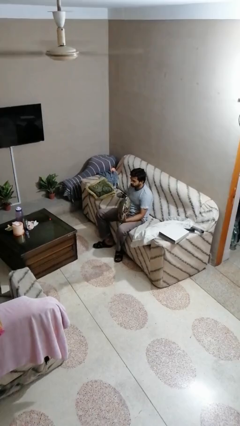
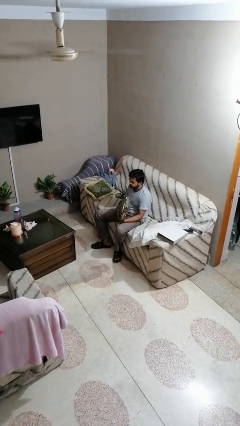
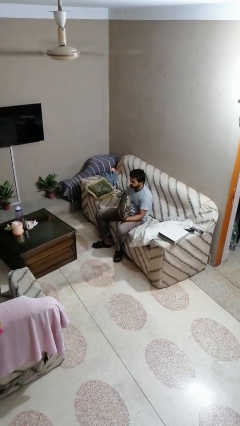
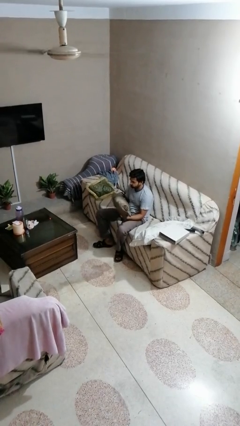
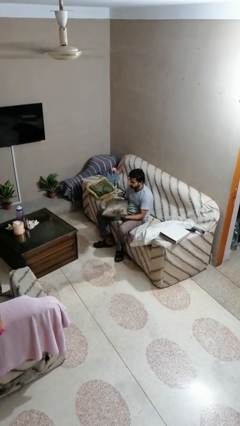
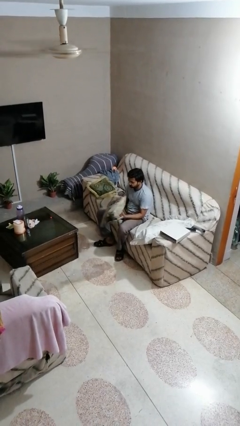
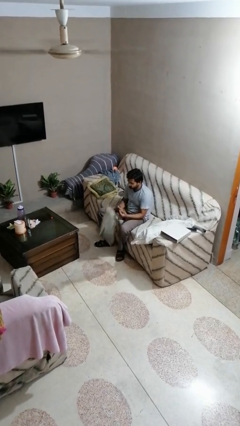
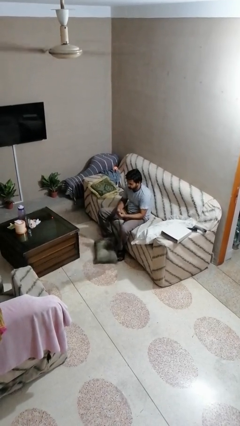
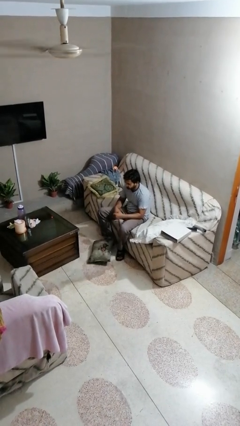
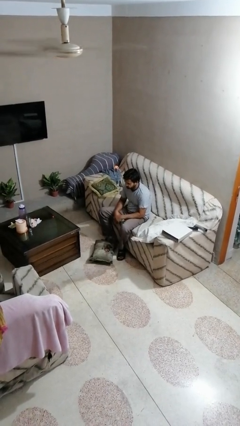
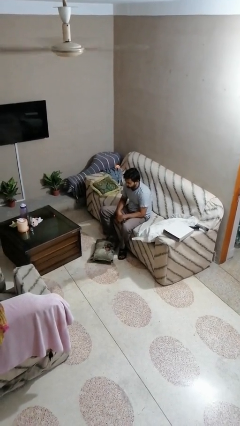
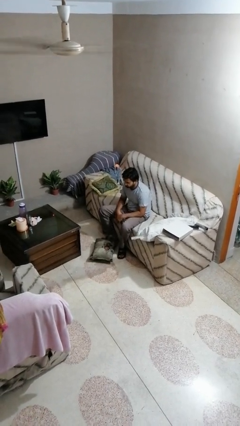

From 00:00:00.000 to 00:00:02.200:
person drops object

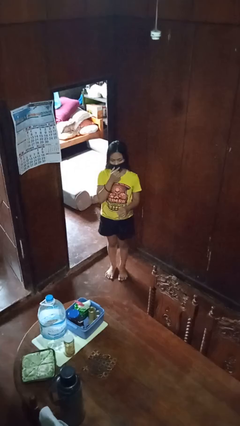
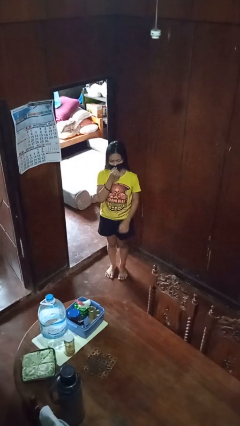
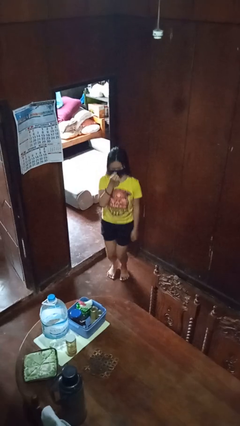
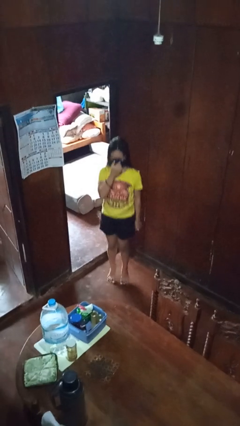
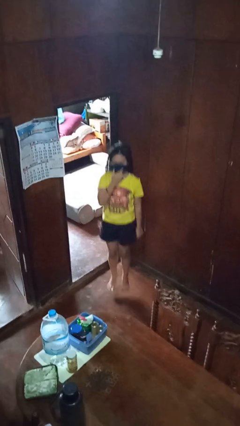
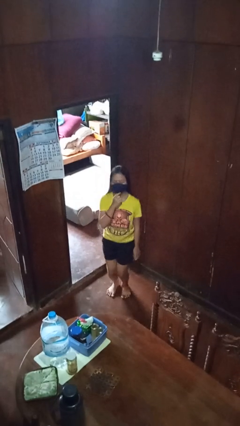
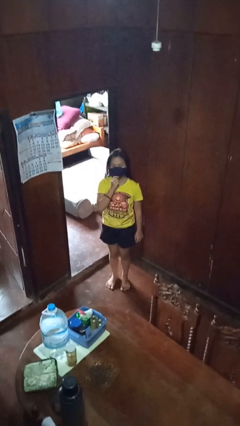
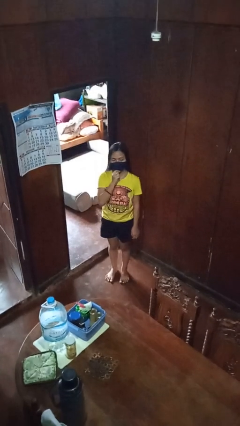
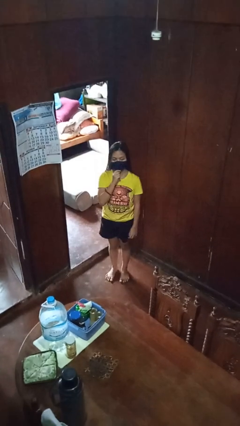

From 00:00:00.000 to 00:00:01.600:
person jumps

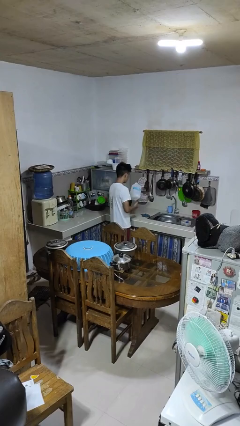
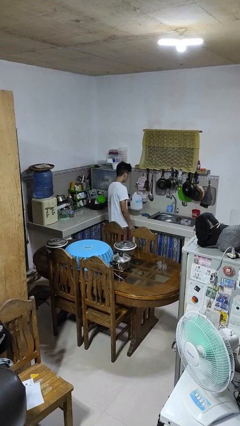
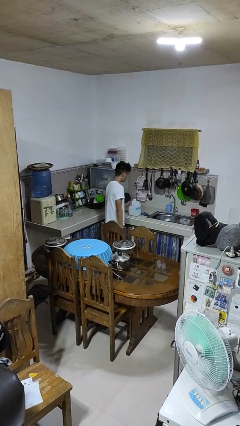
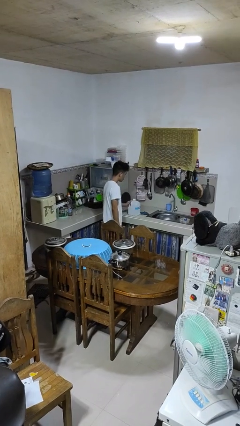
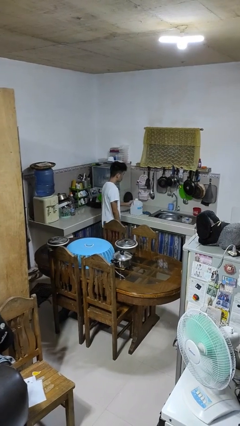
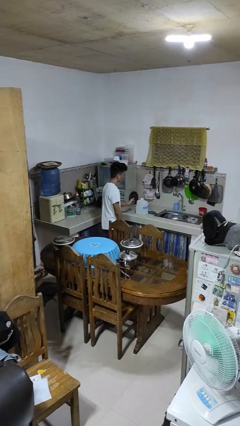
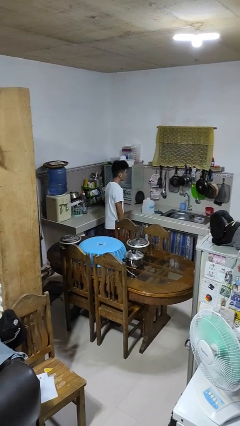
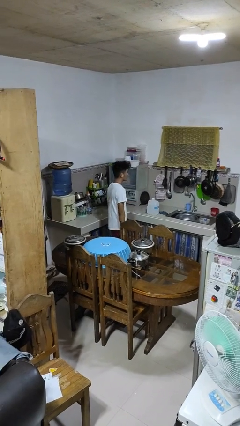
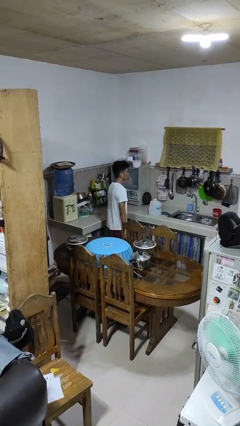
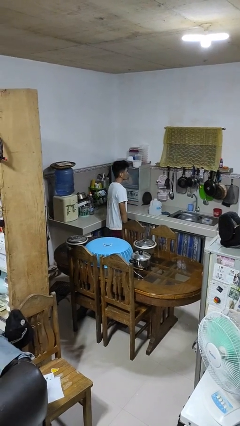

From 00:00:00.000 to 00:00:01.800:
person puts down object on countertop

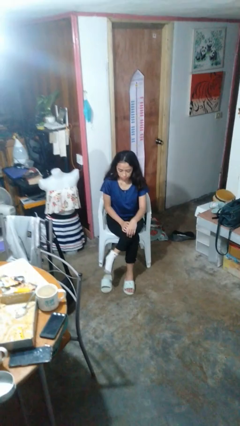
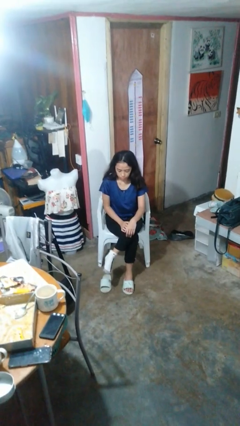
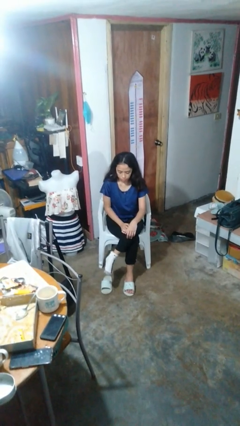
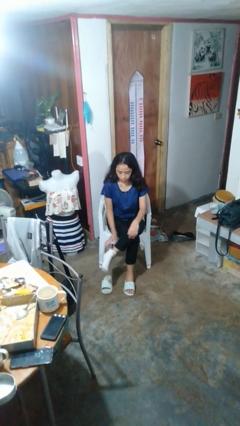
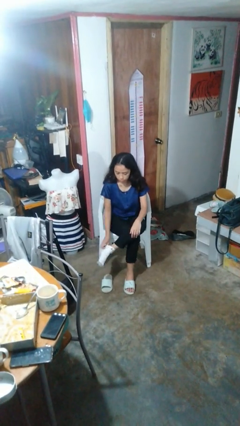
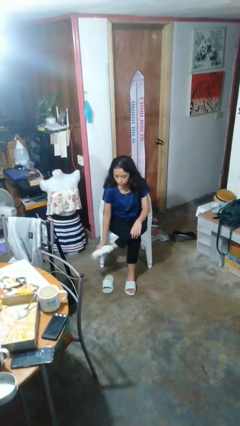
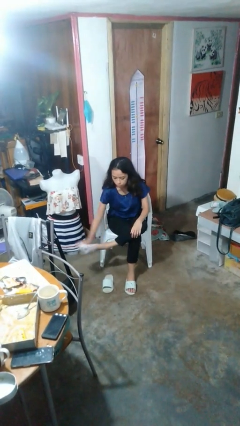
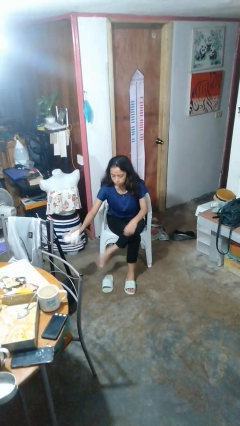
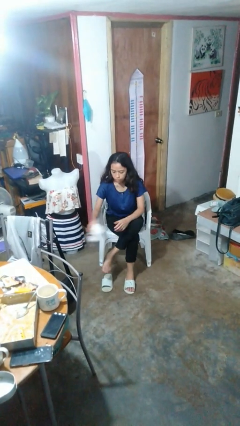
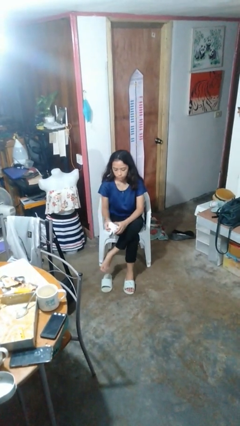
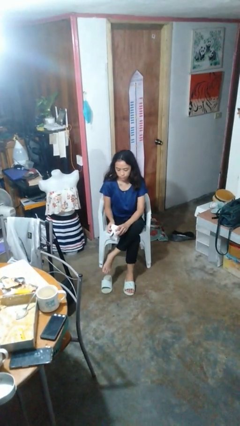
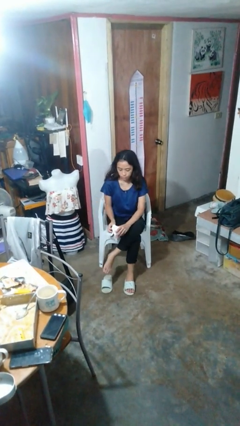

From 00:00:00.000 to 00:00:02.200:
person takes off socks

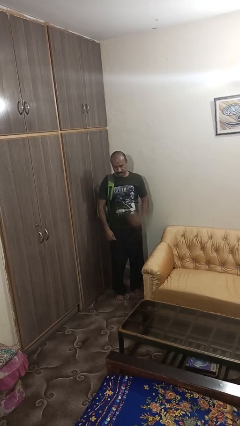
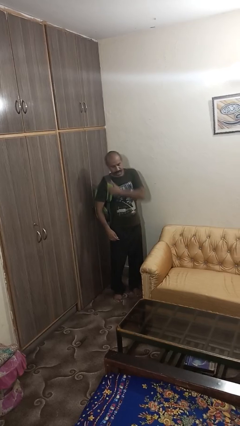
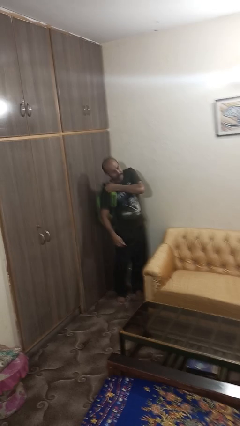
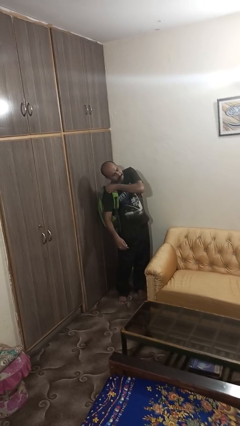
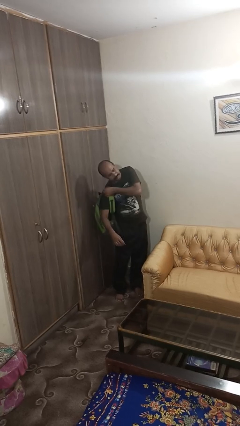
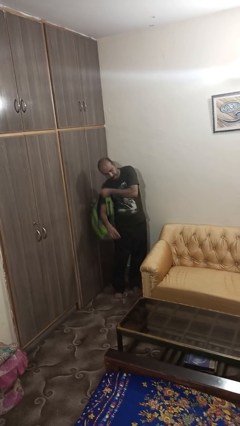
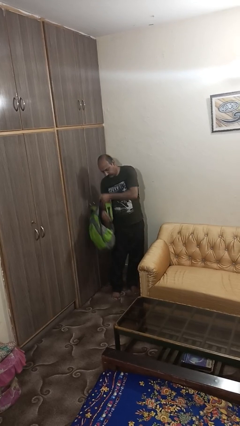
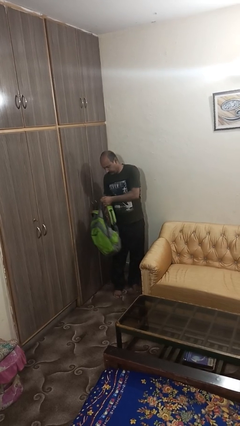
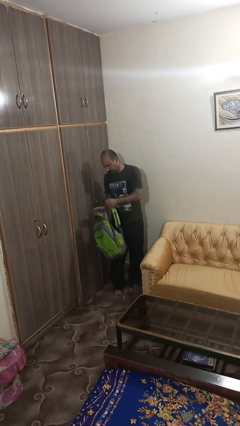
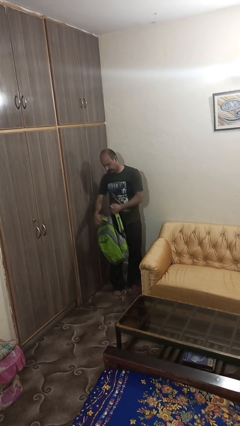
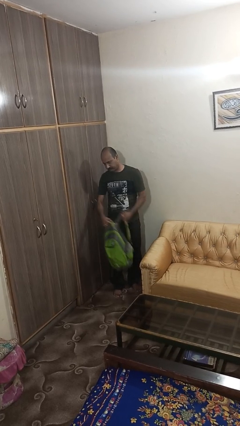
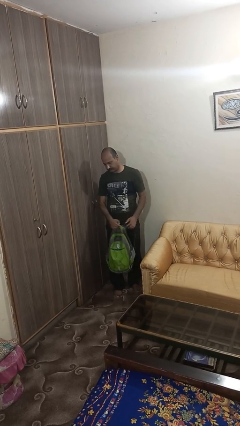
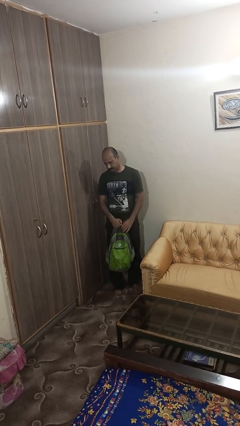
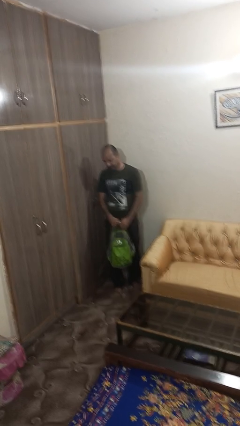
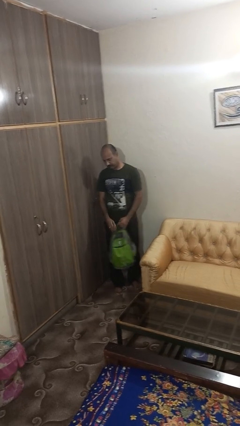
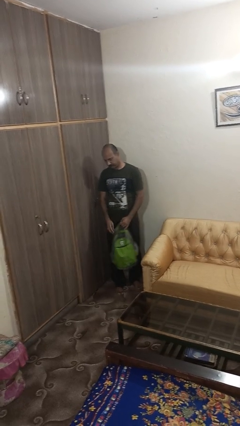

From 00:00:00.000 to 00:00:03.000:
person takes off backpack

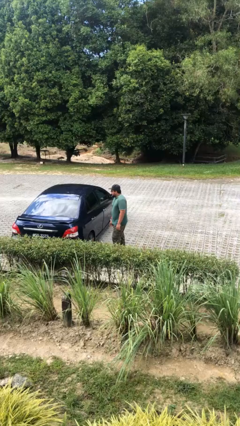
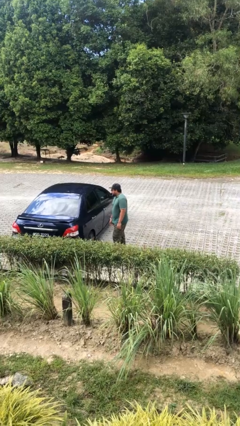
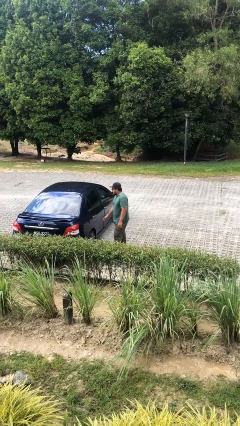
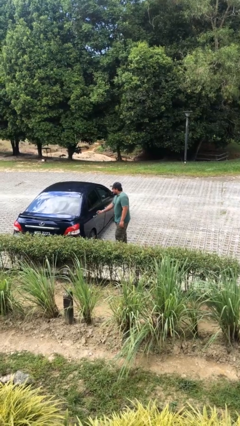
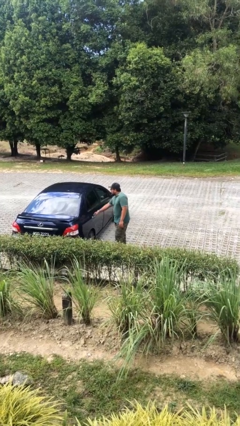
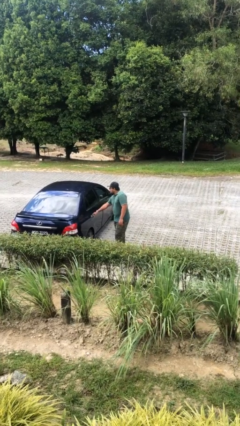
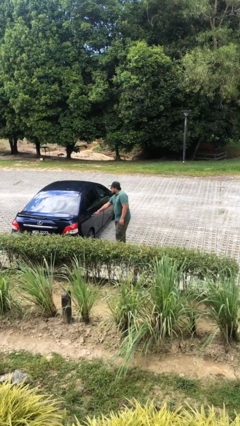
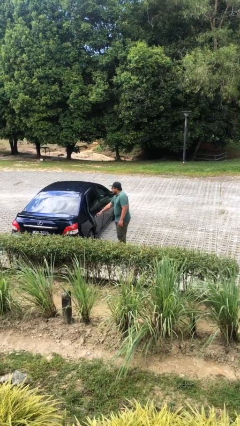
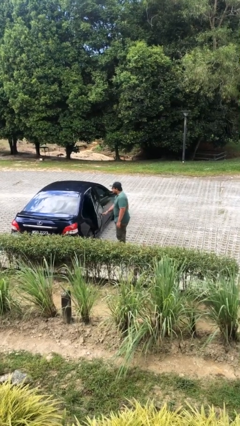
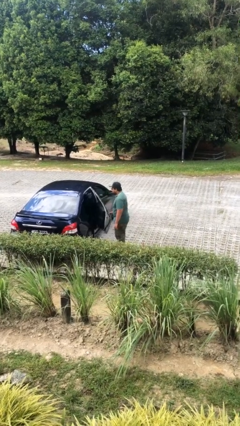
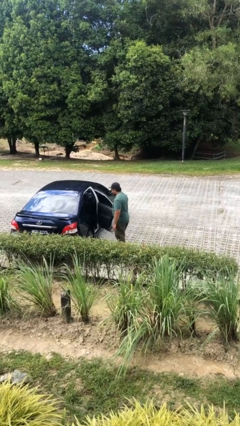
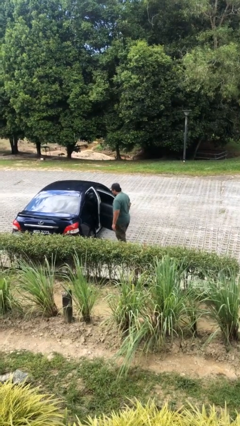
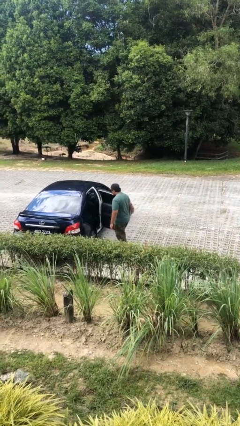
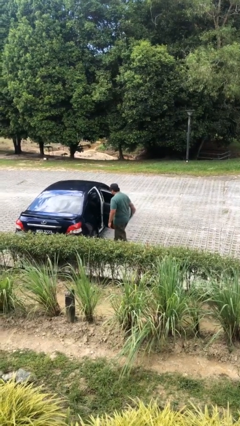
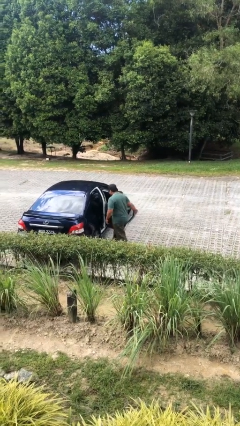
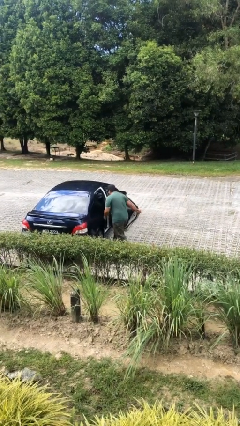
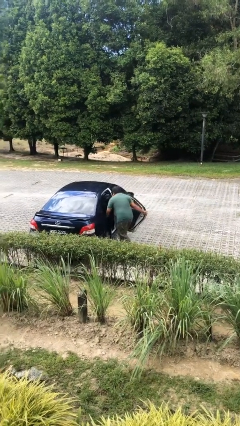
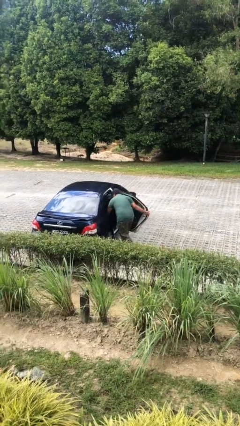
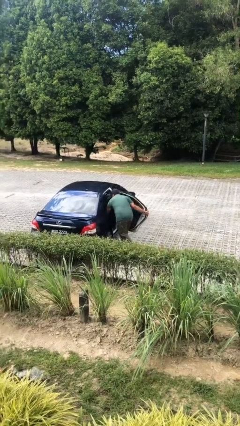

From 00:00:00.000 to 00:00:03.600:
person opens car door

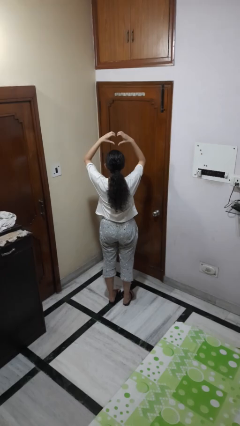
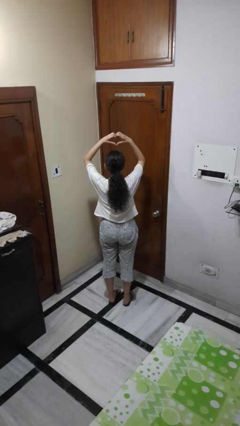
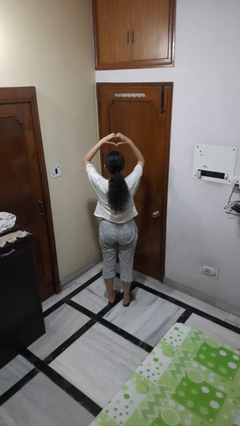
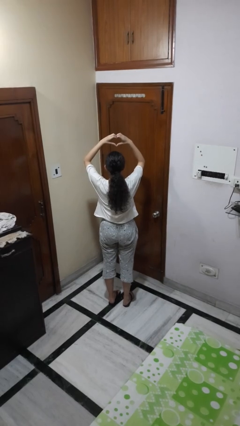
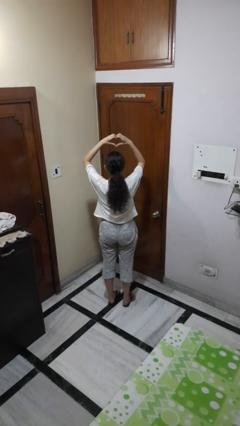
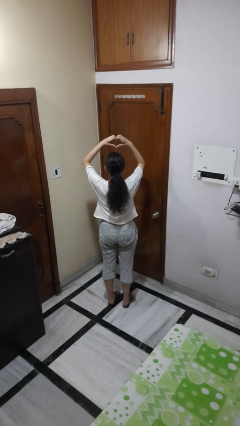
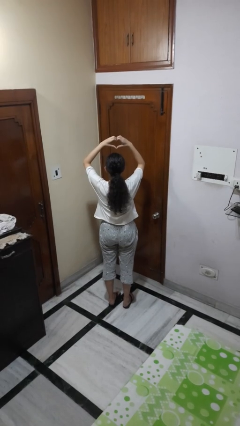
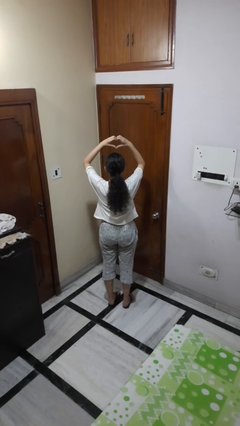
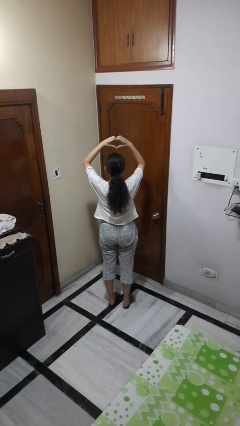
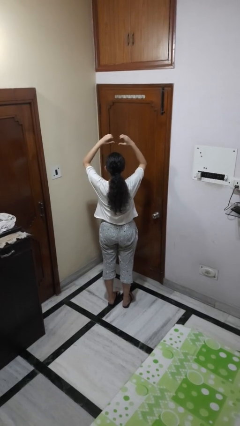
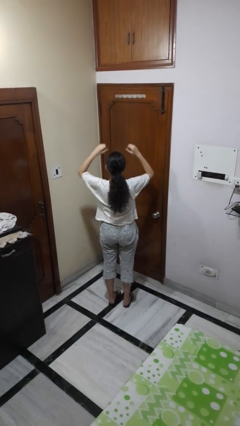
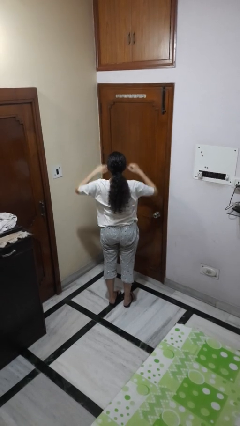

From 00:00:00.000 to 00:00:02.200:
person gestures heart

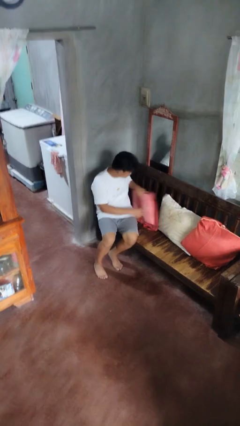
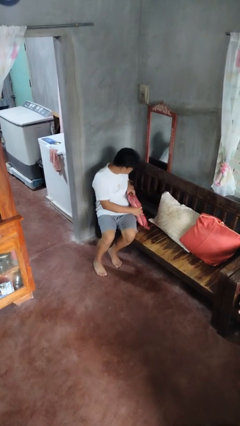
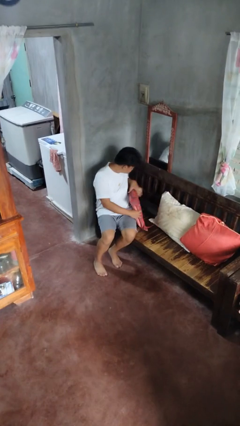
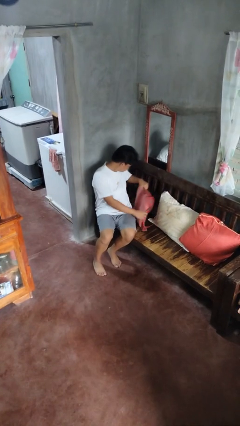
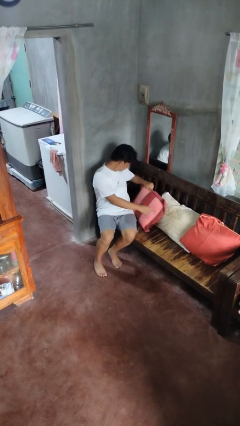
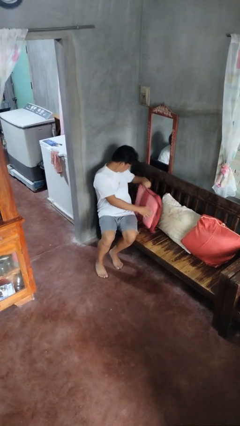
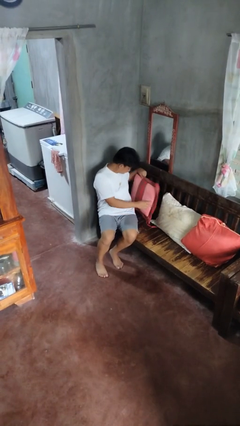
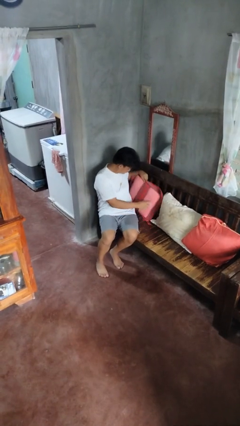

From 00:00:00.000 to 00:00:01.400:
person searches in couch
